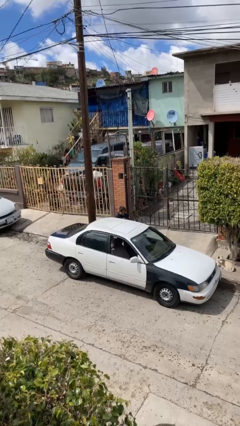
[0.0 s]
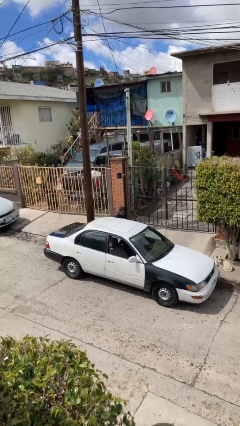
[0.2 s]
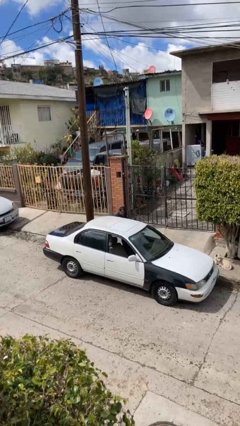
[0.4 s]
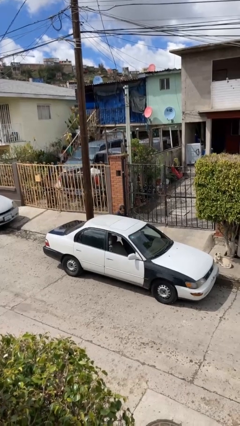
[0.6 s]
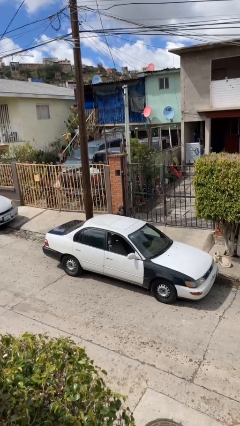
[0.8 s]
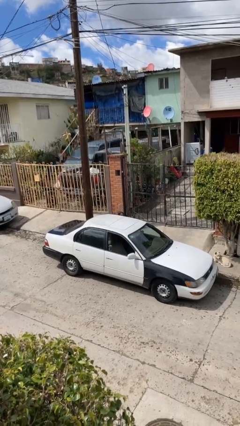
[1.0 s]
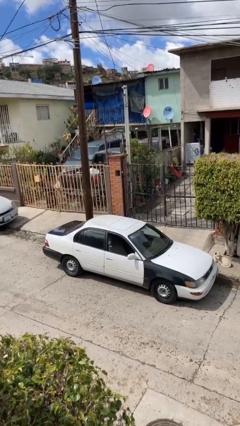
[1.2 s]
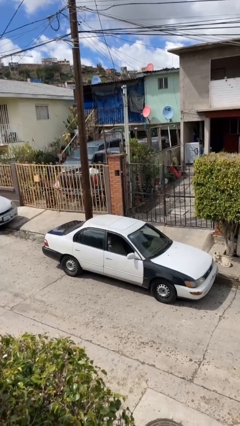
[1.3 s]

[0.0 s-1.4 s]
person enters car

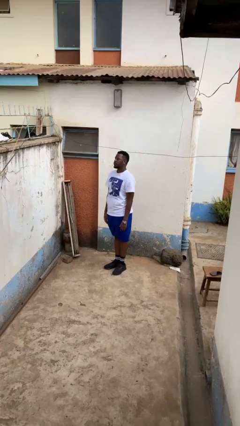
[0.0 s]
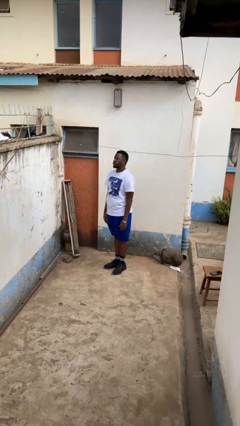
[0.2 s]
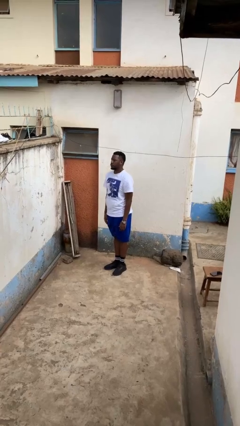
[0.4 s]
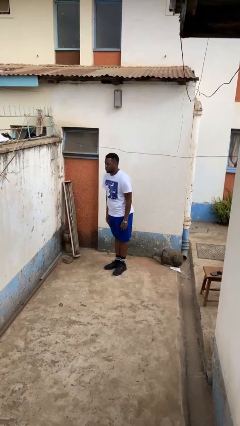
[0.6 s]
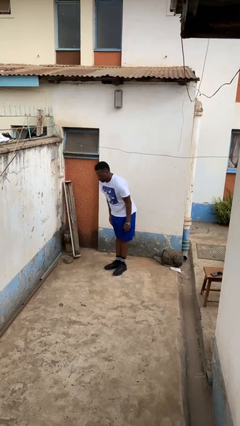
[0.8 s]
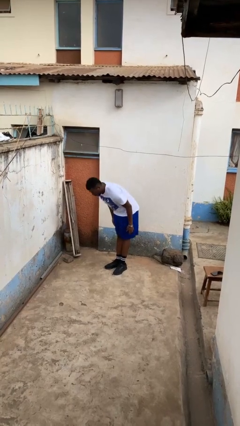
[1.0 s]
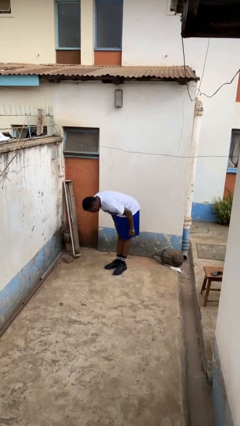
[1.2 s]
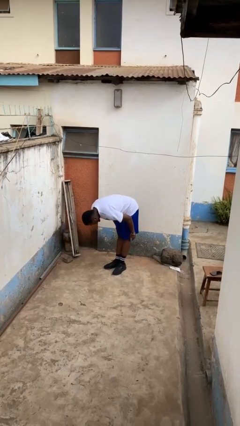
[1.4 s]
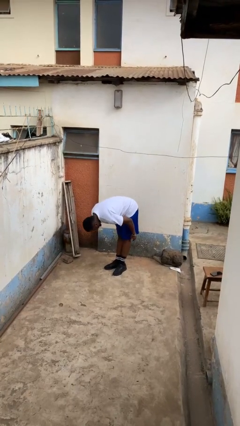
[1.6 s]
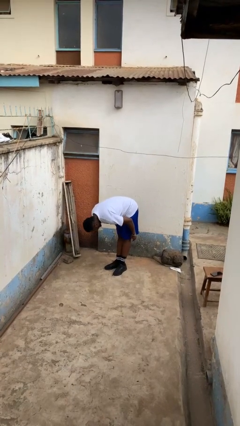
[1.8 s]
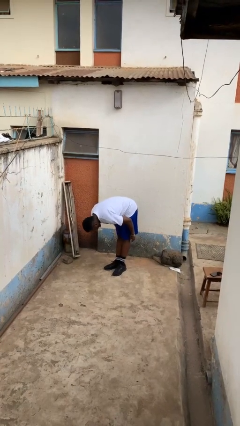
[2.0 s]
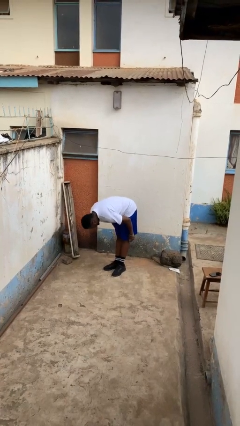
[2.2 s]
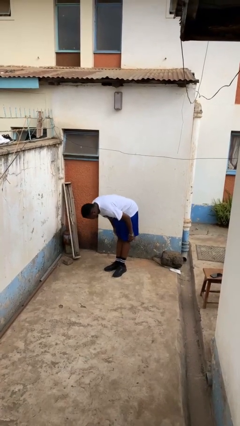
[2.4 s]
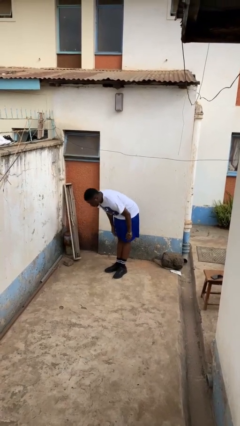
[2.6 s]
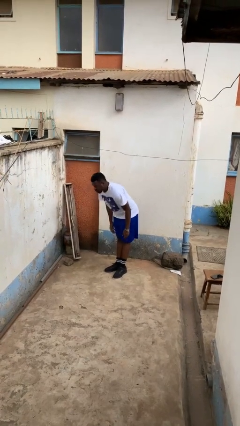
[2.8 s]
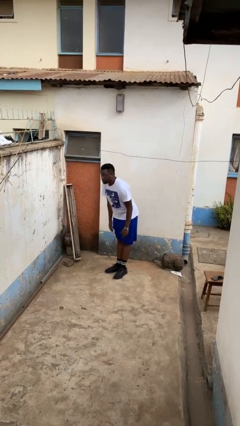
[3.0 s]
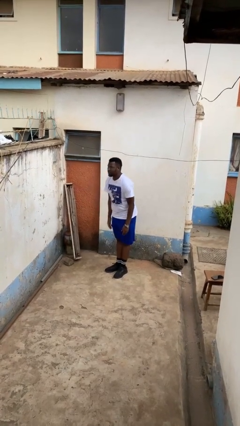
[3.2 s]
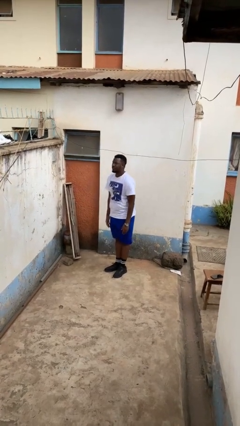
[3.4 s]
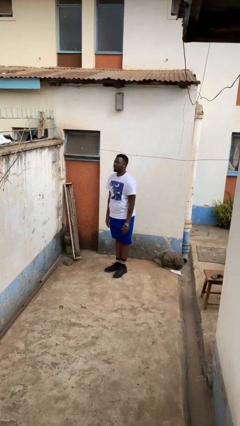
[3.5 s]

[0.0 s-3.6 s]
person bows

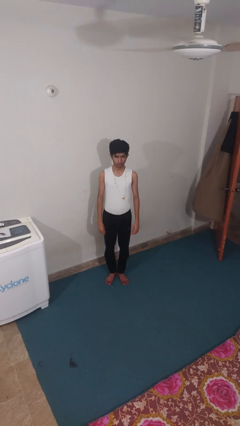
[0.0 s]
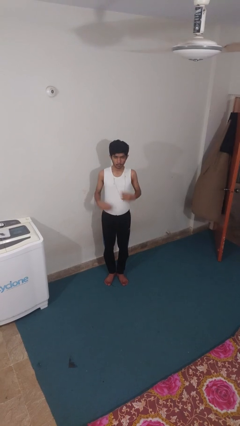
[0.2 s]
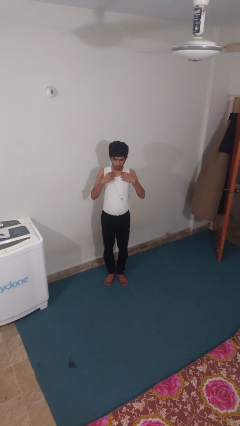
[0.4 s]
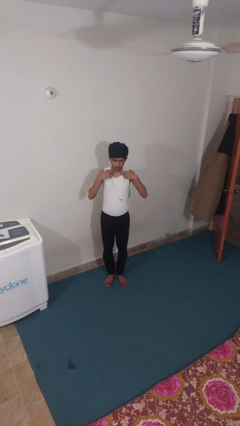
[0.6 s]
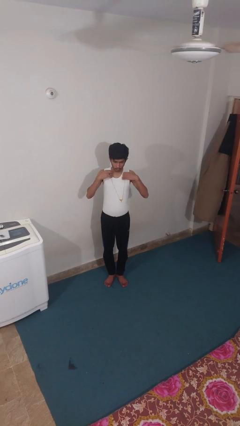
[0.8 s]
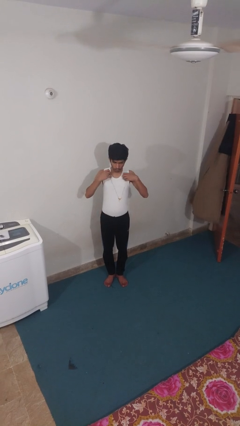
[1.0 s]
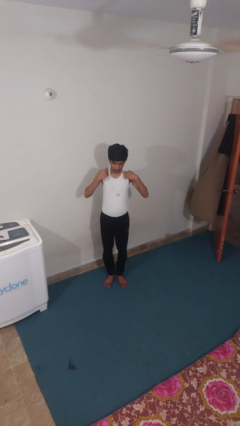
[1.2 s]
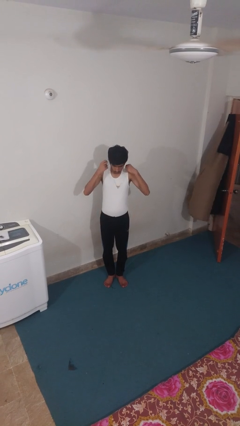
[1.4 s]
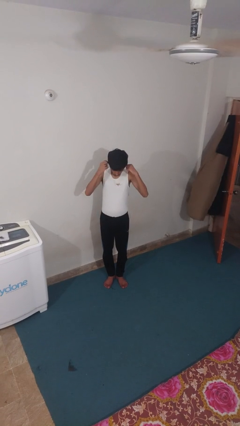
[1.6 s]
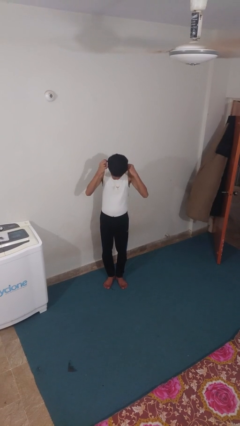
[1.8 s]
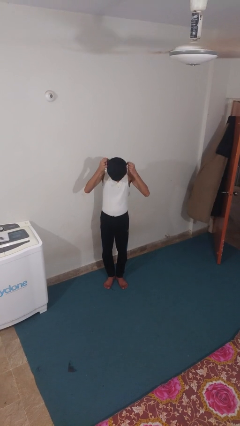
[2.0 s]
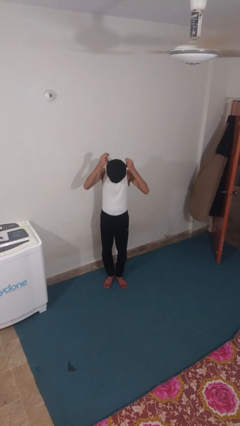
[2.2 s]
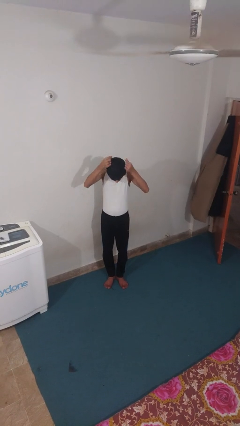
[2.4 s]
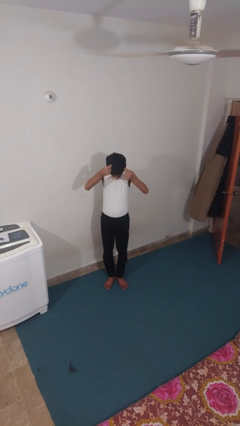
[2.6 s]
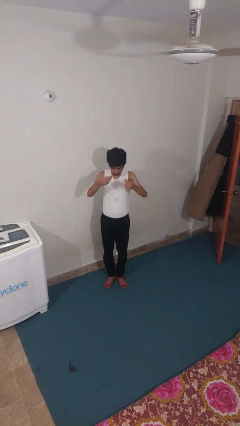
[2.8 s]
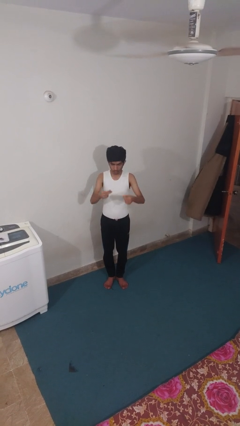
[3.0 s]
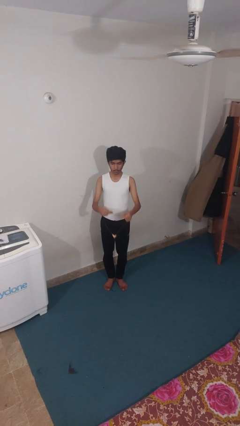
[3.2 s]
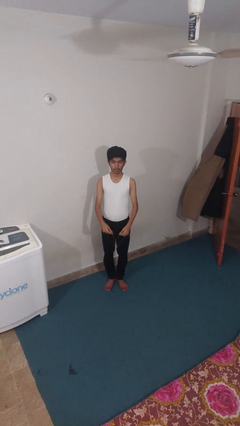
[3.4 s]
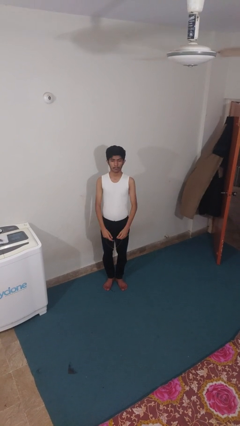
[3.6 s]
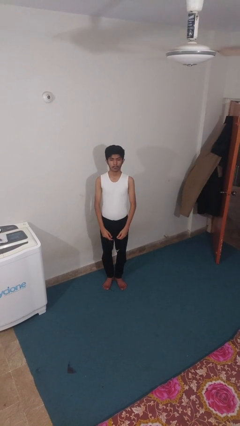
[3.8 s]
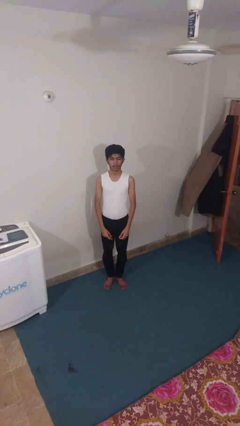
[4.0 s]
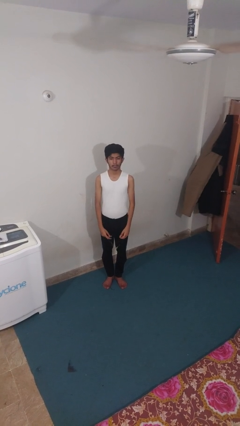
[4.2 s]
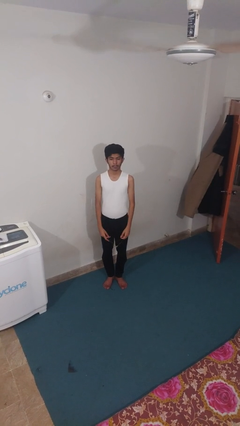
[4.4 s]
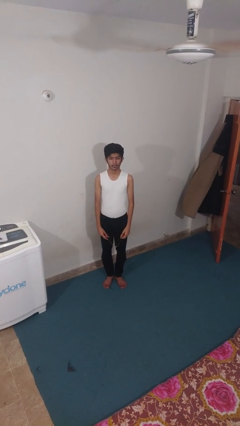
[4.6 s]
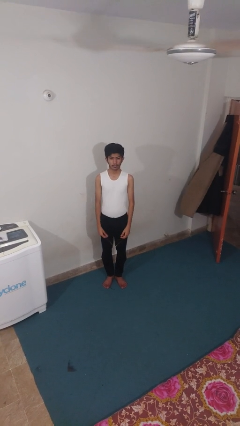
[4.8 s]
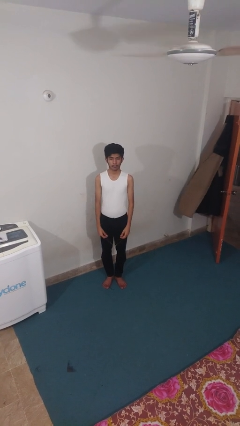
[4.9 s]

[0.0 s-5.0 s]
person takes off necklace

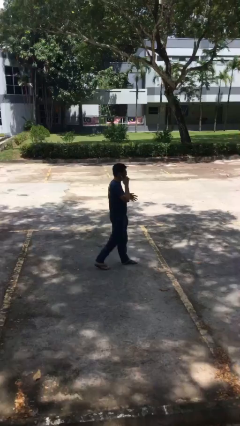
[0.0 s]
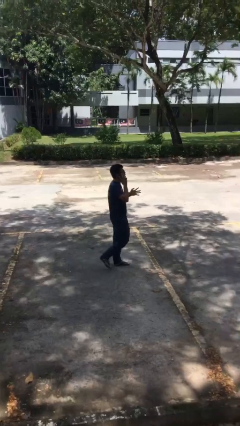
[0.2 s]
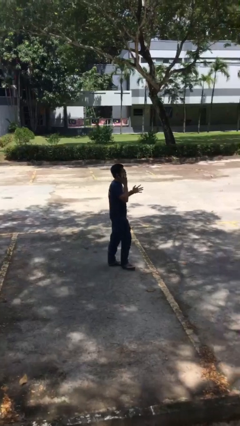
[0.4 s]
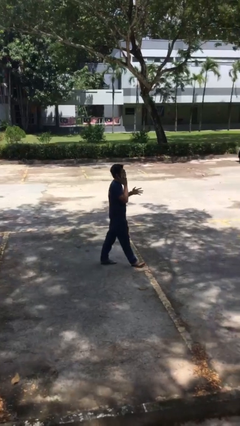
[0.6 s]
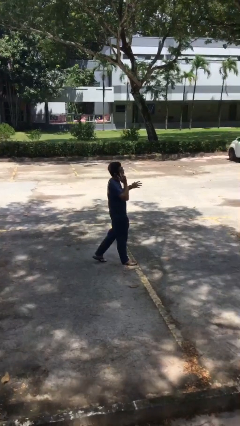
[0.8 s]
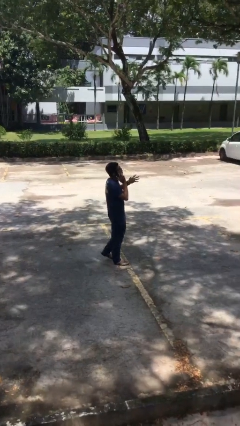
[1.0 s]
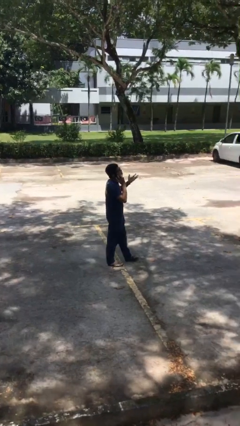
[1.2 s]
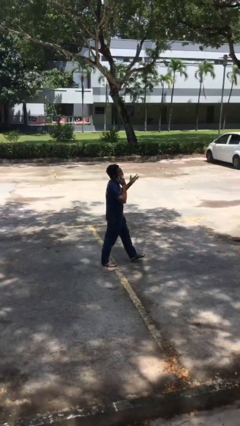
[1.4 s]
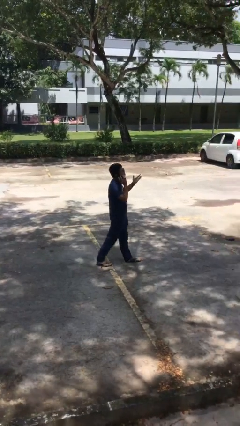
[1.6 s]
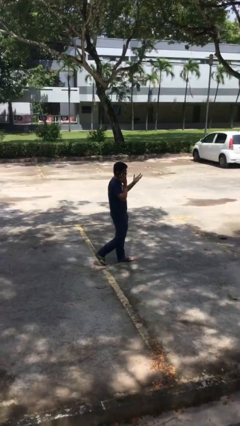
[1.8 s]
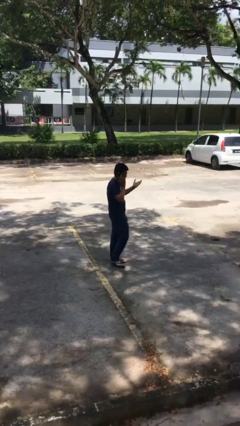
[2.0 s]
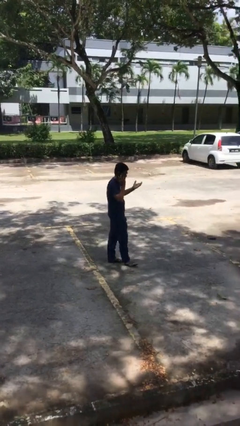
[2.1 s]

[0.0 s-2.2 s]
person talks on phone

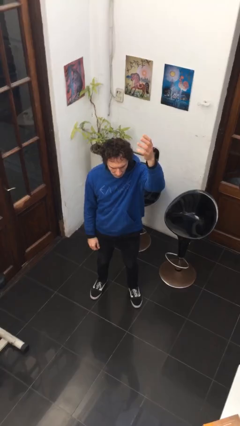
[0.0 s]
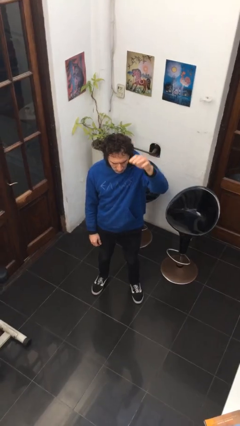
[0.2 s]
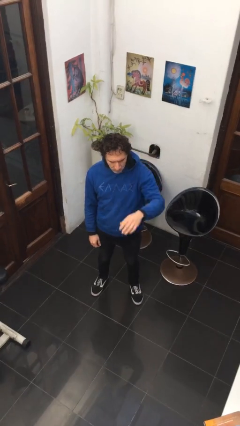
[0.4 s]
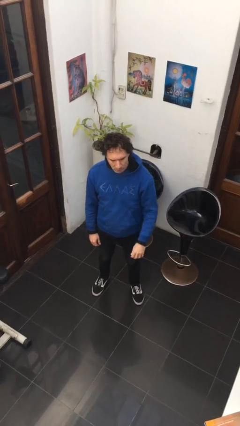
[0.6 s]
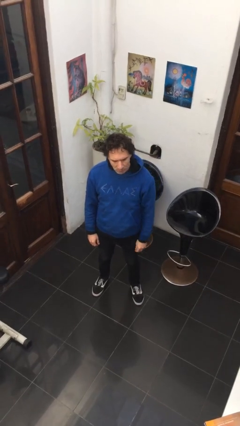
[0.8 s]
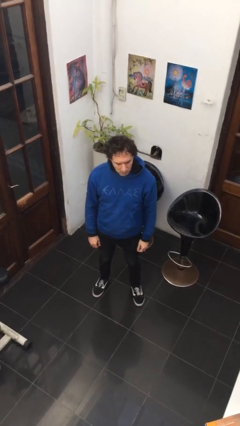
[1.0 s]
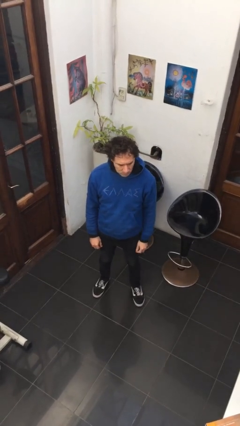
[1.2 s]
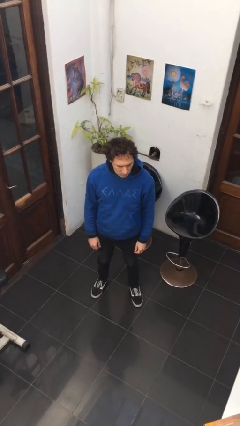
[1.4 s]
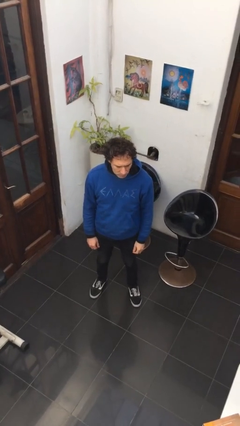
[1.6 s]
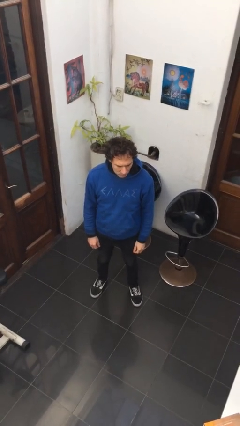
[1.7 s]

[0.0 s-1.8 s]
person gestures swipe down

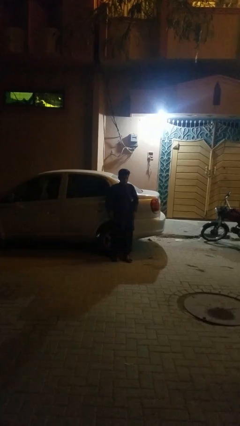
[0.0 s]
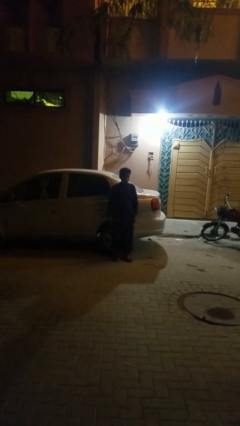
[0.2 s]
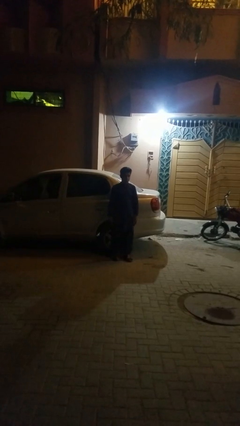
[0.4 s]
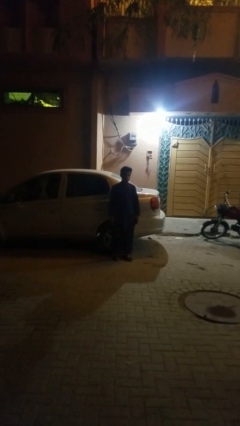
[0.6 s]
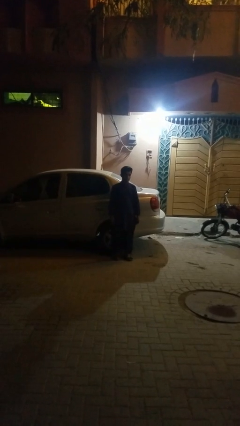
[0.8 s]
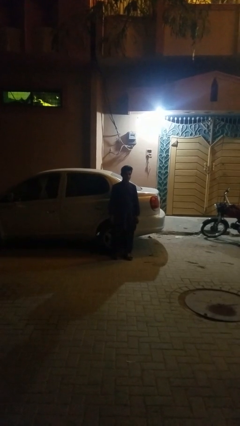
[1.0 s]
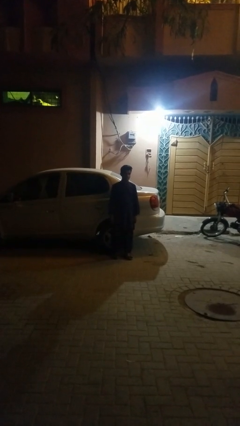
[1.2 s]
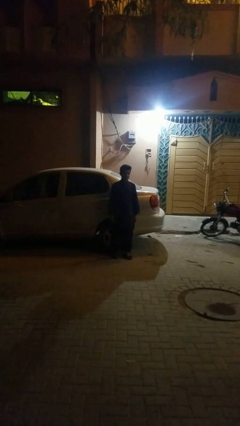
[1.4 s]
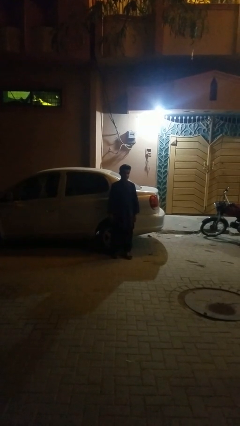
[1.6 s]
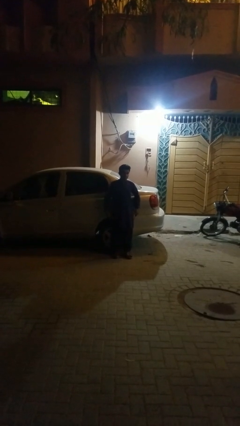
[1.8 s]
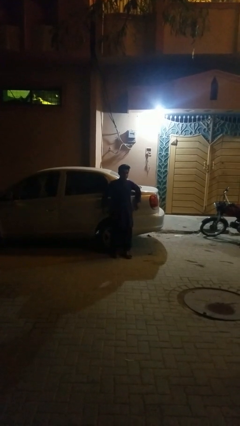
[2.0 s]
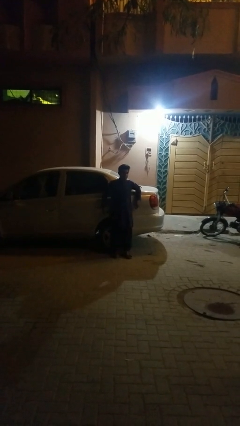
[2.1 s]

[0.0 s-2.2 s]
person leans against car

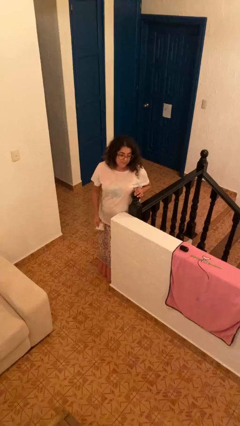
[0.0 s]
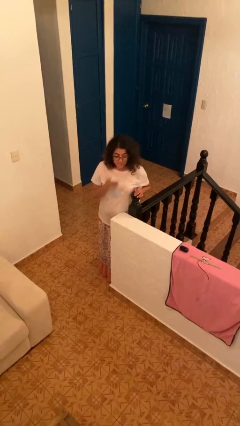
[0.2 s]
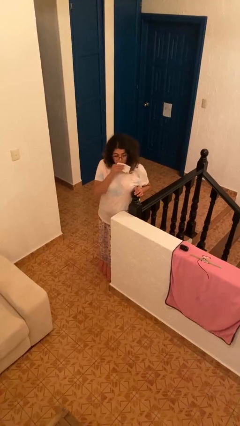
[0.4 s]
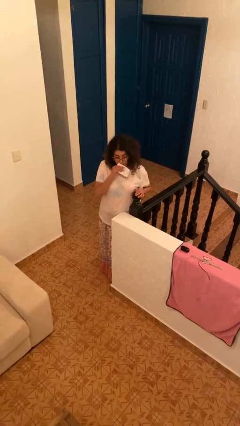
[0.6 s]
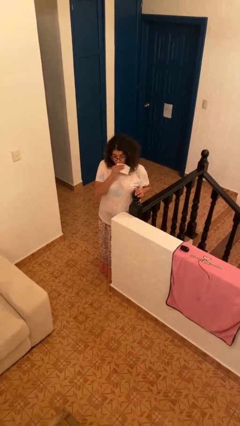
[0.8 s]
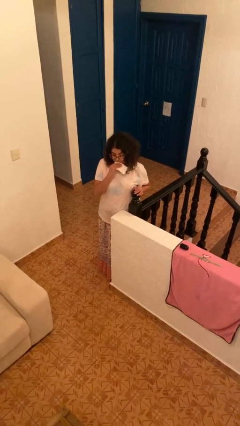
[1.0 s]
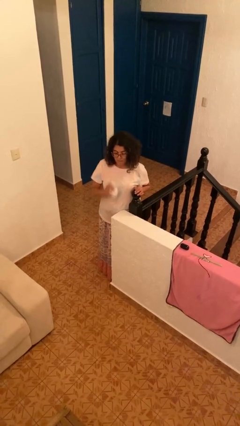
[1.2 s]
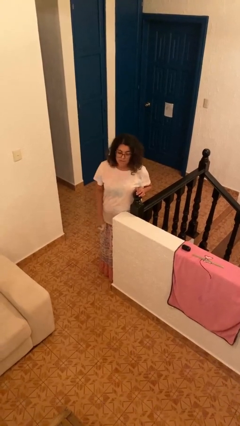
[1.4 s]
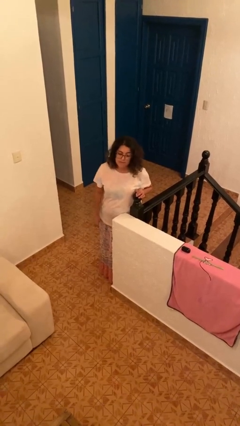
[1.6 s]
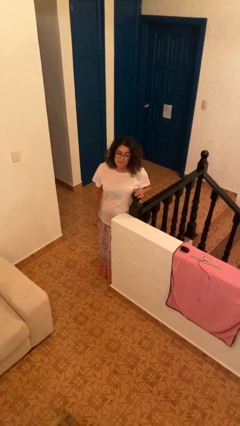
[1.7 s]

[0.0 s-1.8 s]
person wipes mouth with napkin
